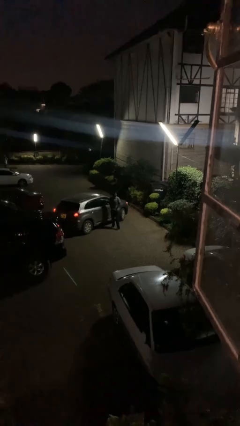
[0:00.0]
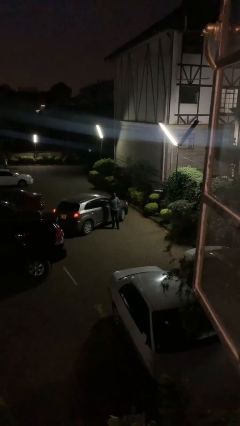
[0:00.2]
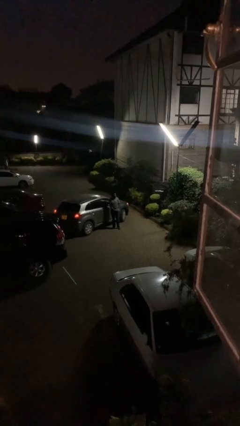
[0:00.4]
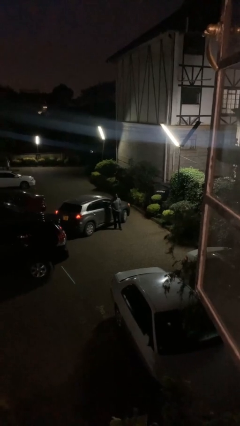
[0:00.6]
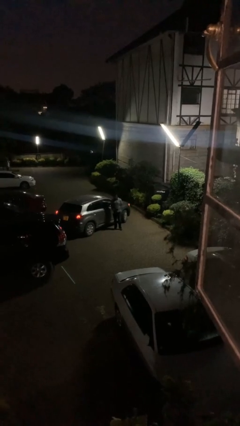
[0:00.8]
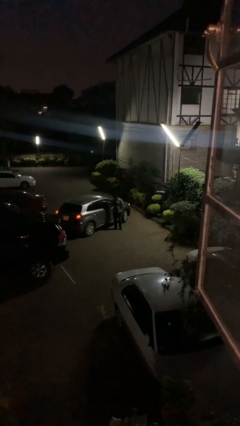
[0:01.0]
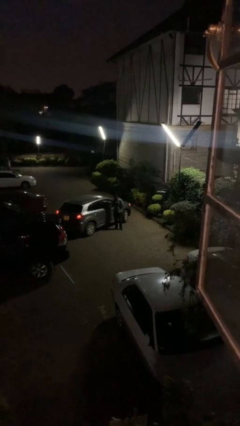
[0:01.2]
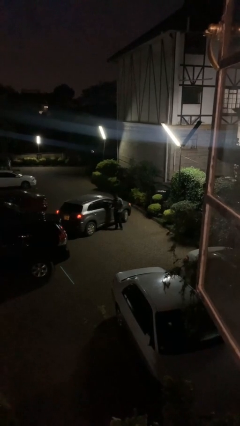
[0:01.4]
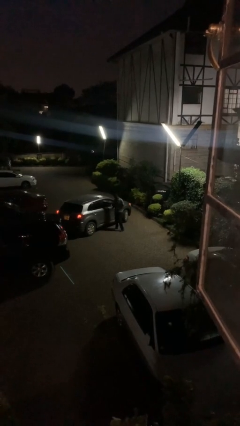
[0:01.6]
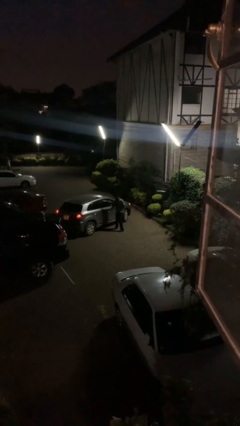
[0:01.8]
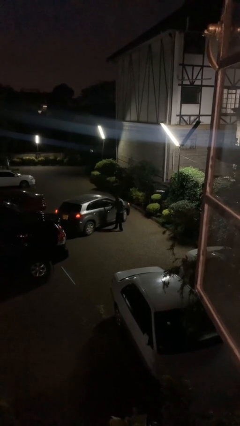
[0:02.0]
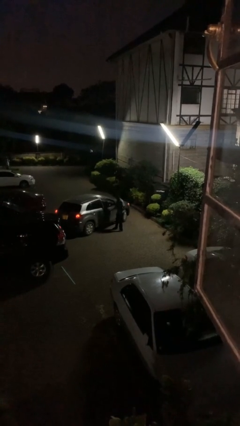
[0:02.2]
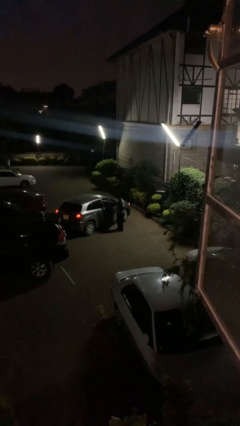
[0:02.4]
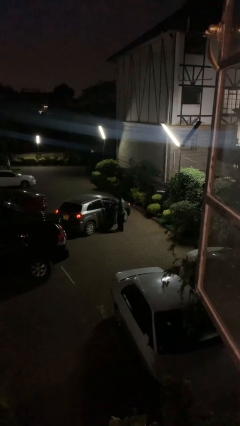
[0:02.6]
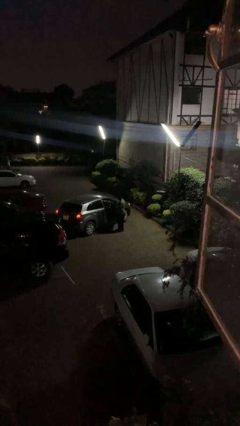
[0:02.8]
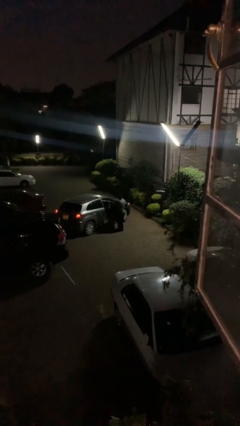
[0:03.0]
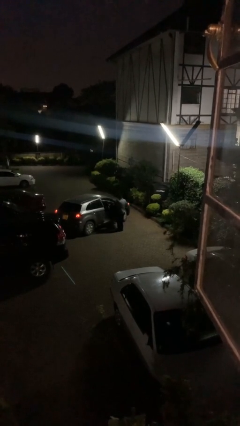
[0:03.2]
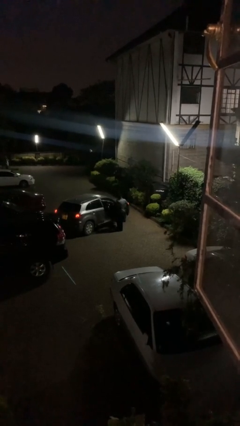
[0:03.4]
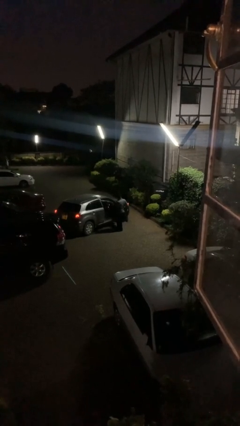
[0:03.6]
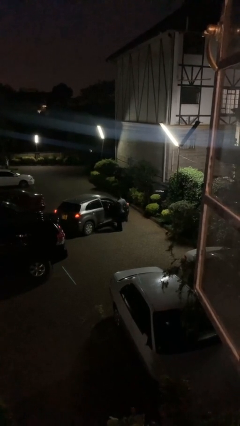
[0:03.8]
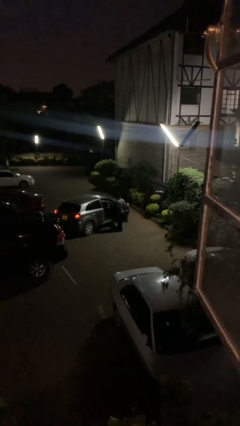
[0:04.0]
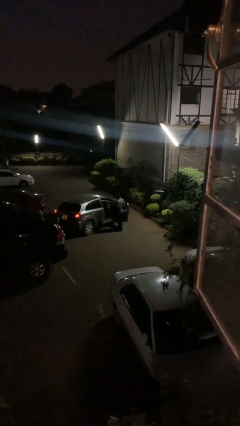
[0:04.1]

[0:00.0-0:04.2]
person opens car door

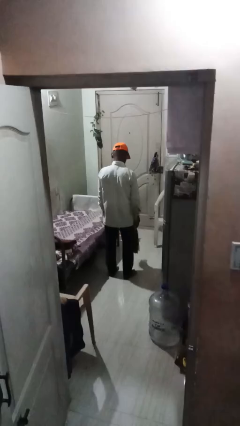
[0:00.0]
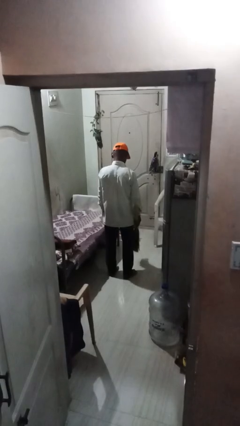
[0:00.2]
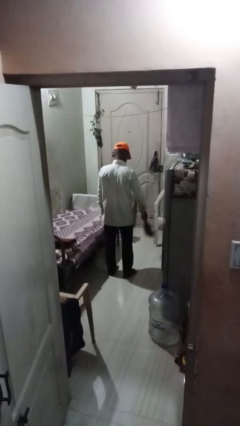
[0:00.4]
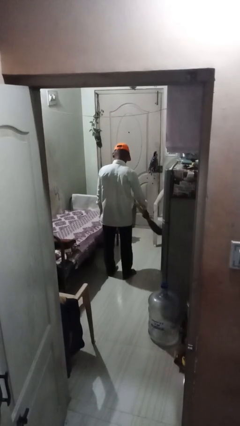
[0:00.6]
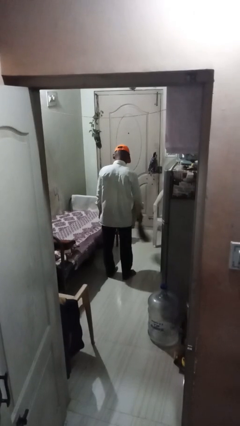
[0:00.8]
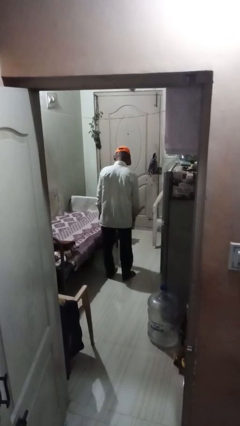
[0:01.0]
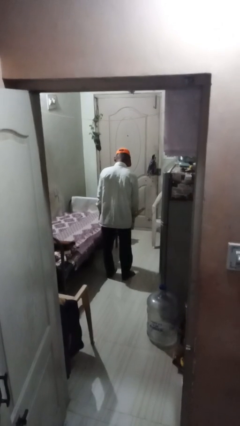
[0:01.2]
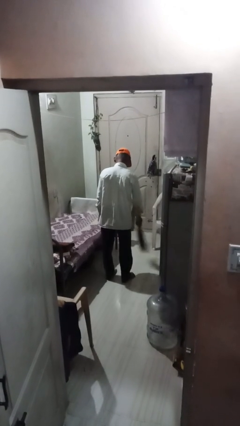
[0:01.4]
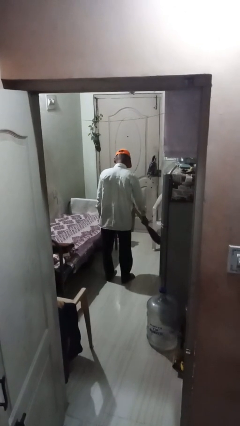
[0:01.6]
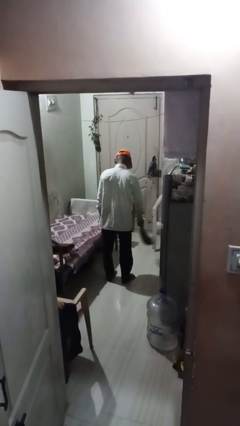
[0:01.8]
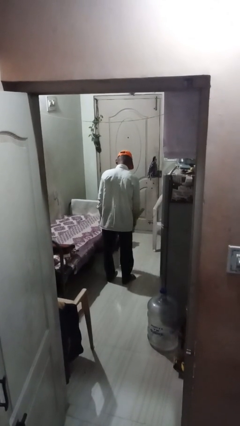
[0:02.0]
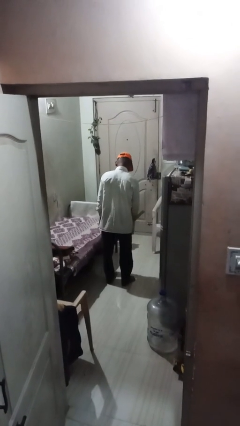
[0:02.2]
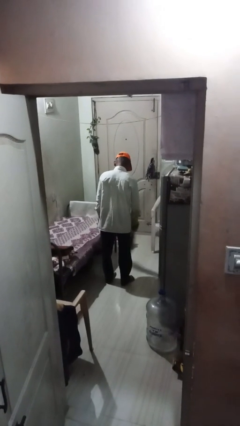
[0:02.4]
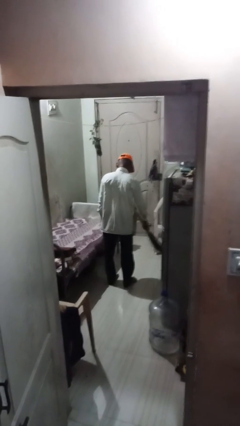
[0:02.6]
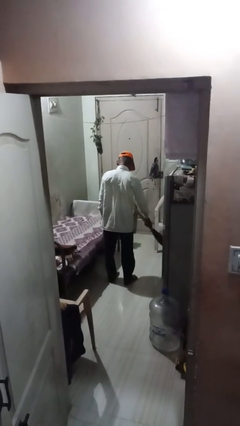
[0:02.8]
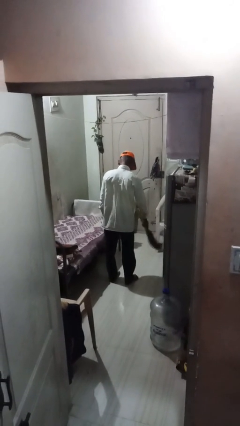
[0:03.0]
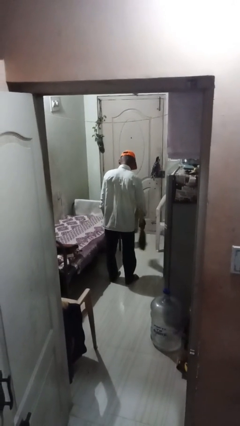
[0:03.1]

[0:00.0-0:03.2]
person mops

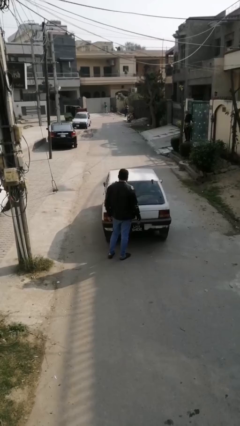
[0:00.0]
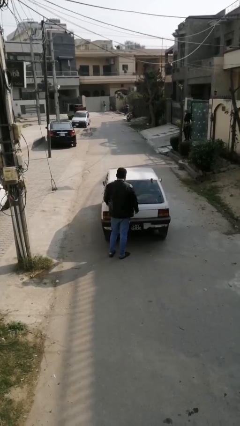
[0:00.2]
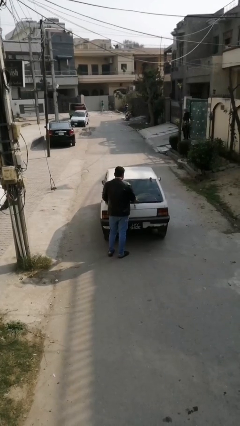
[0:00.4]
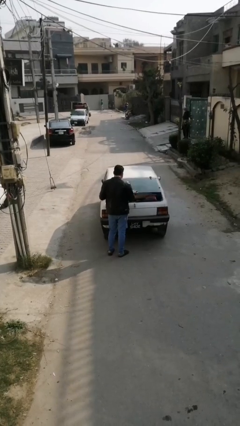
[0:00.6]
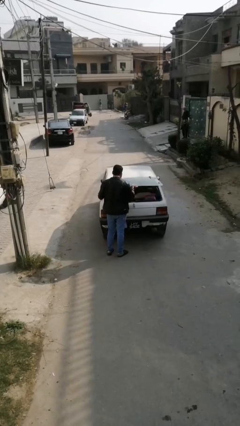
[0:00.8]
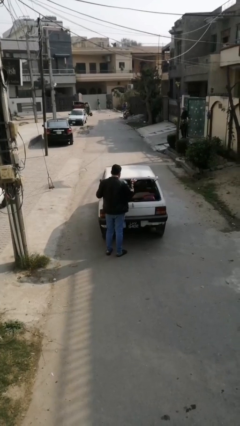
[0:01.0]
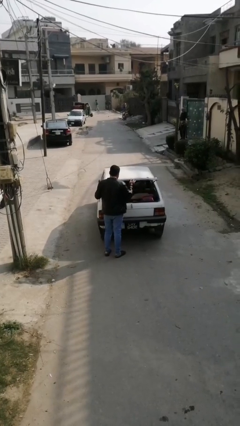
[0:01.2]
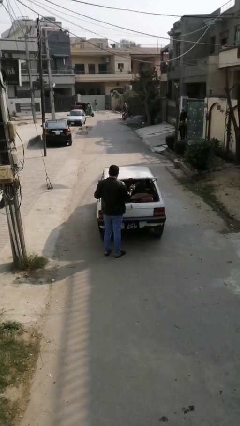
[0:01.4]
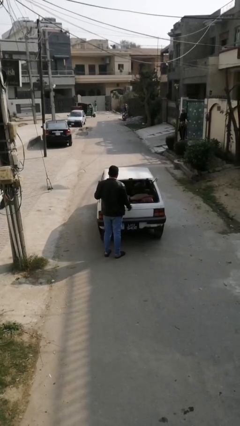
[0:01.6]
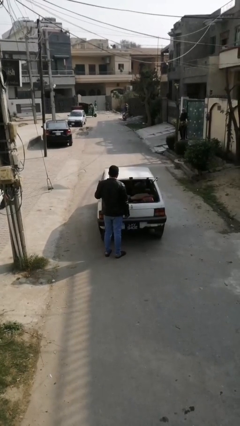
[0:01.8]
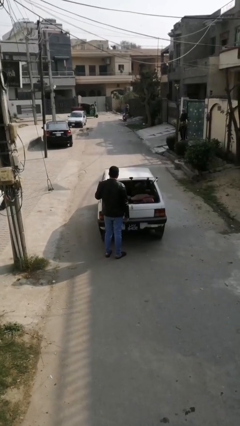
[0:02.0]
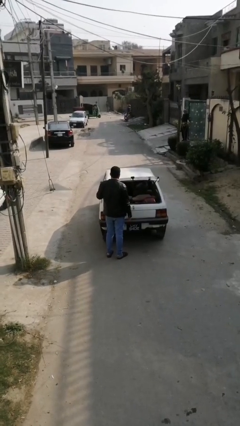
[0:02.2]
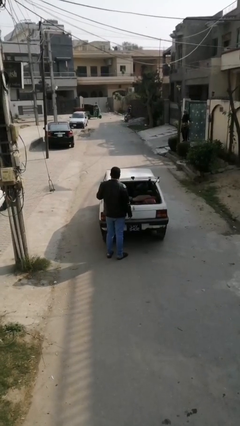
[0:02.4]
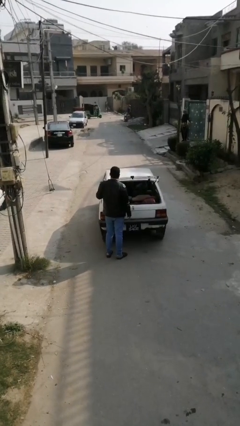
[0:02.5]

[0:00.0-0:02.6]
person opens car trunk

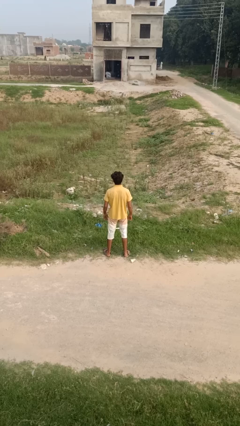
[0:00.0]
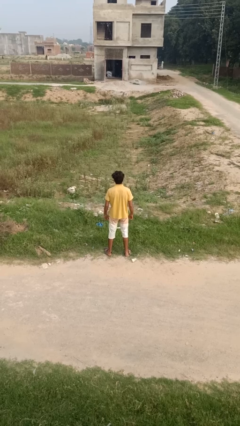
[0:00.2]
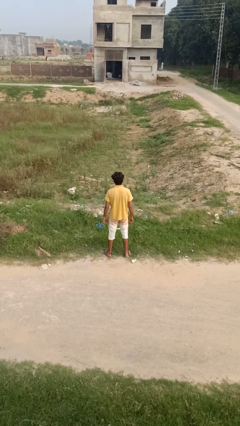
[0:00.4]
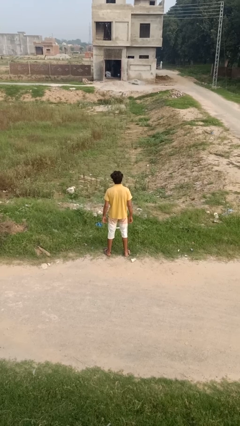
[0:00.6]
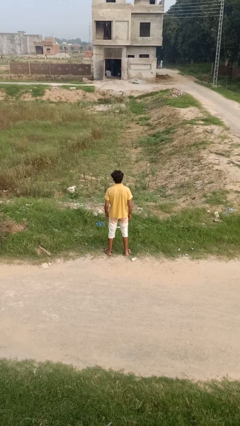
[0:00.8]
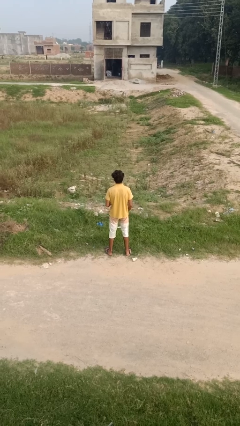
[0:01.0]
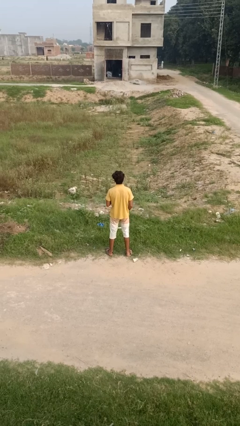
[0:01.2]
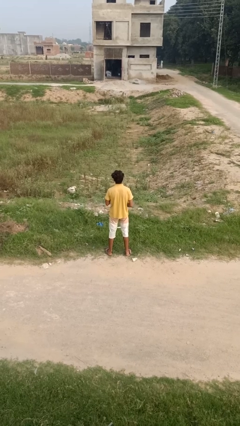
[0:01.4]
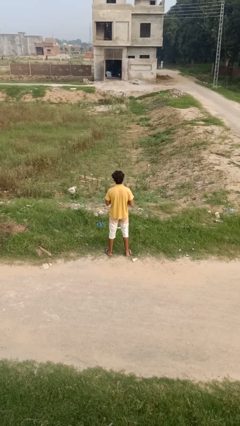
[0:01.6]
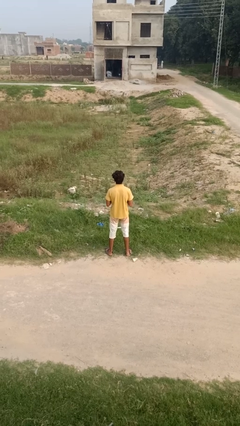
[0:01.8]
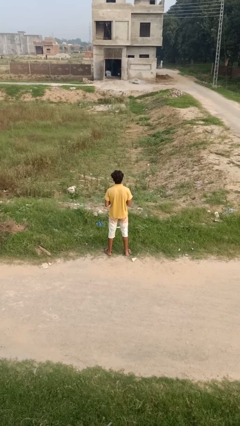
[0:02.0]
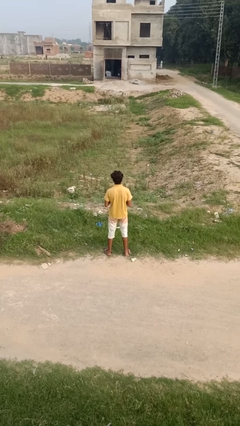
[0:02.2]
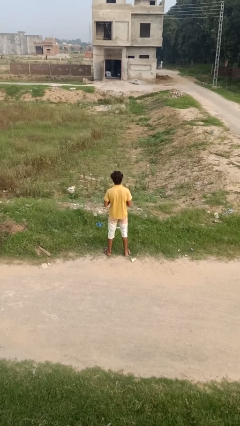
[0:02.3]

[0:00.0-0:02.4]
person unbuttons shirt

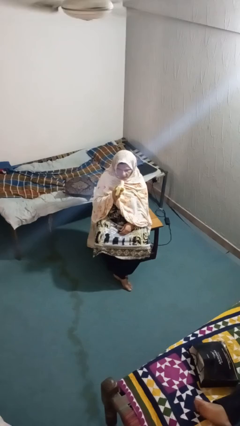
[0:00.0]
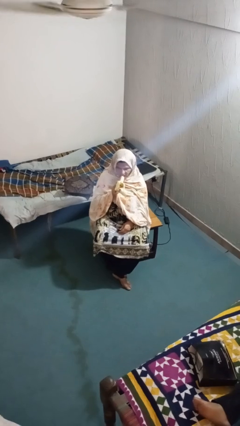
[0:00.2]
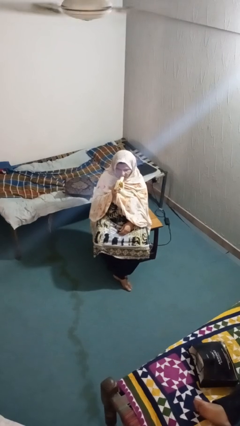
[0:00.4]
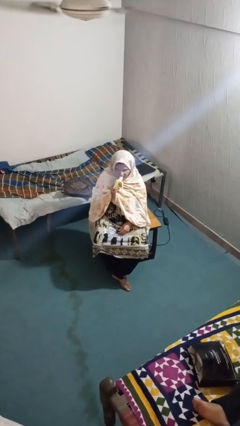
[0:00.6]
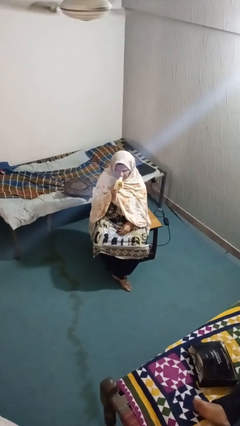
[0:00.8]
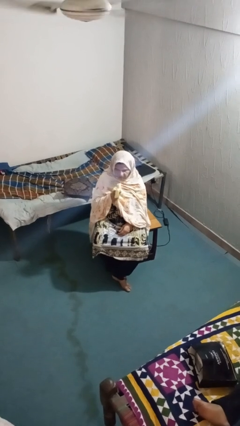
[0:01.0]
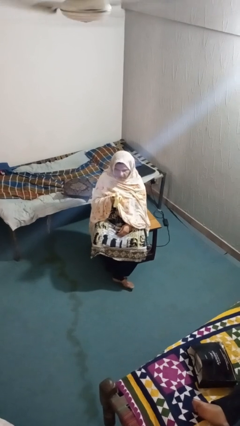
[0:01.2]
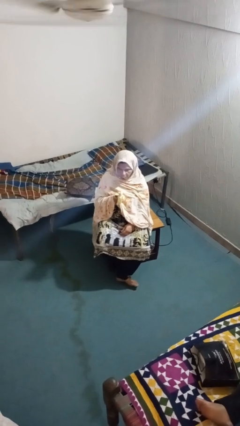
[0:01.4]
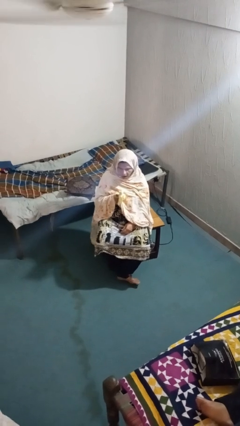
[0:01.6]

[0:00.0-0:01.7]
person eats banana

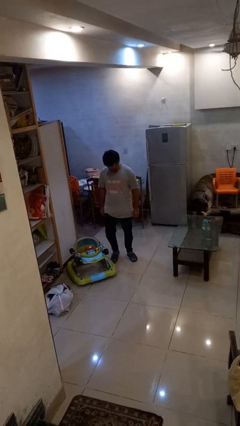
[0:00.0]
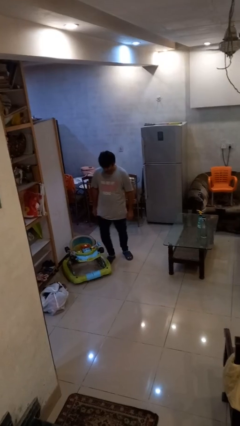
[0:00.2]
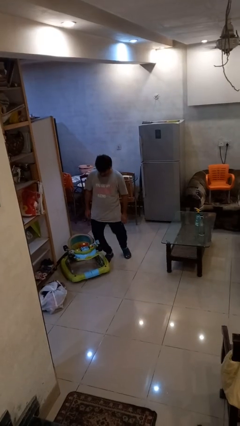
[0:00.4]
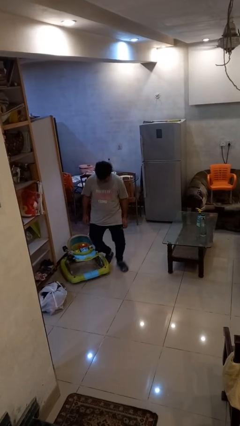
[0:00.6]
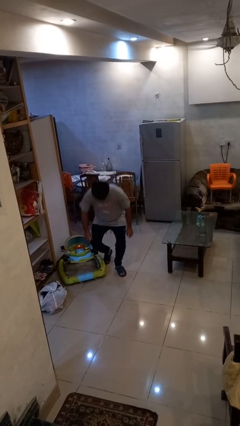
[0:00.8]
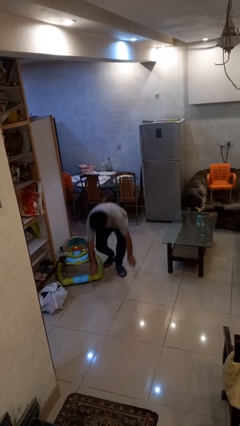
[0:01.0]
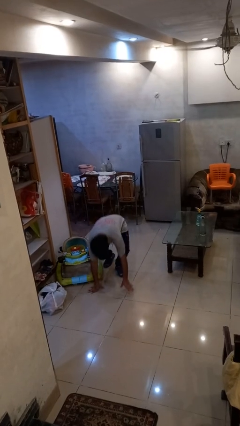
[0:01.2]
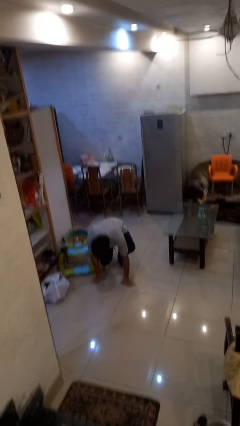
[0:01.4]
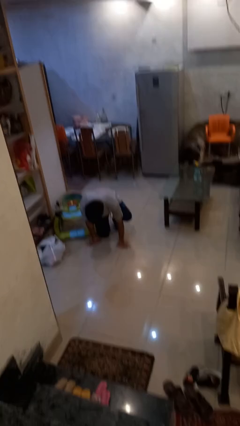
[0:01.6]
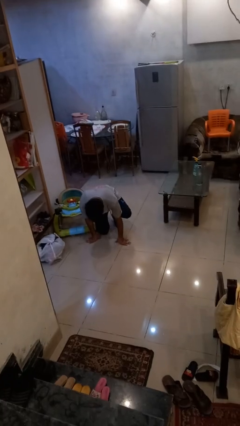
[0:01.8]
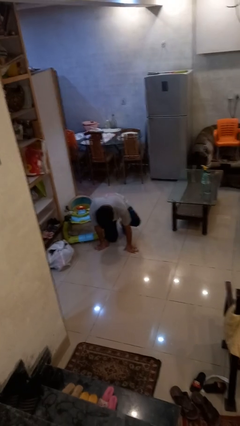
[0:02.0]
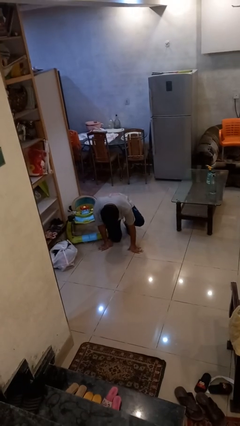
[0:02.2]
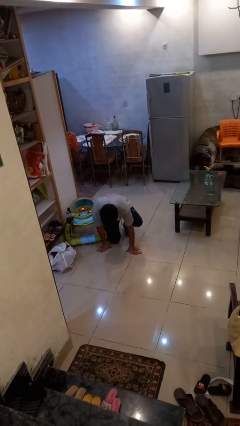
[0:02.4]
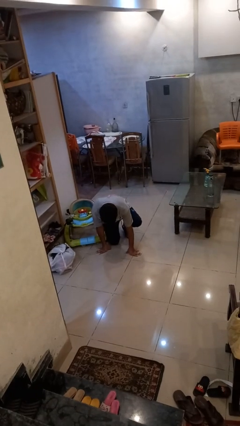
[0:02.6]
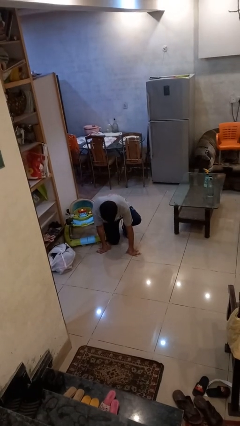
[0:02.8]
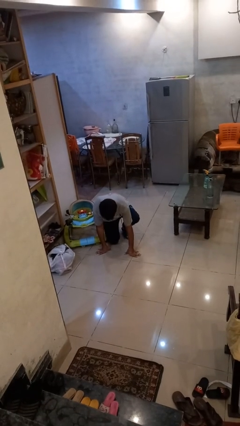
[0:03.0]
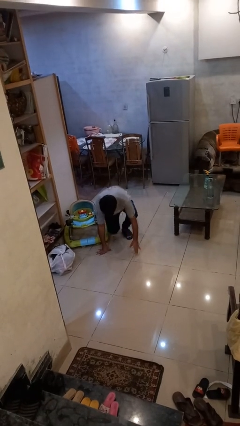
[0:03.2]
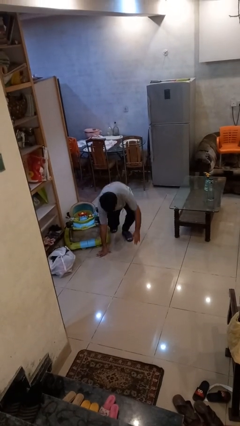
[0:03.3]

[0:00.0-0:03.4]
person trips on object on floor

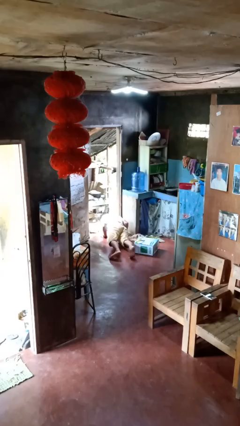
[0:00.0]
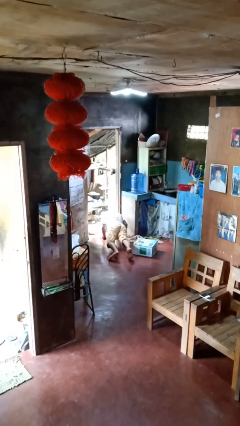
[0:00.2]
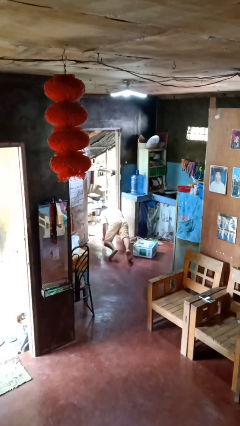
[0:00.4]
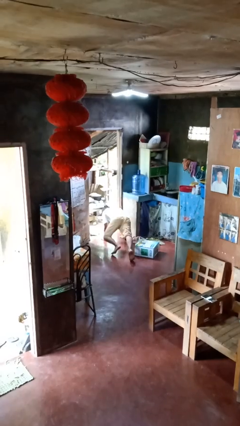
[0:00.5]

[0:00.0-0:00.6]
person lies down on floor
